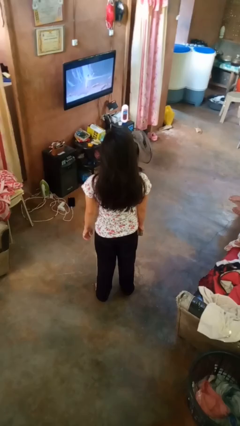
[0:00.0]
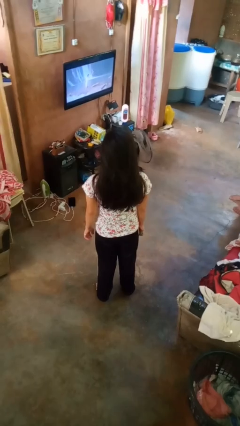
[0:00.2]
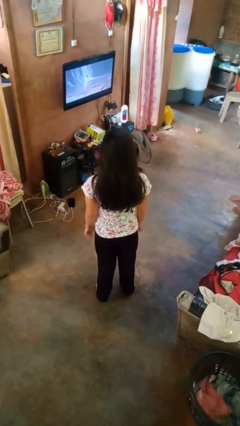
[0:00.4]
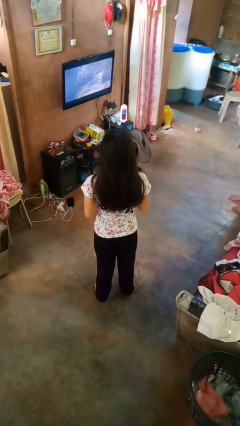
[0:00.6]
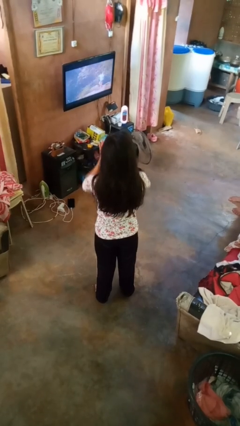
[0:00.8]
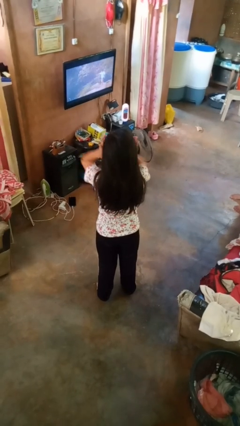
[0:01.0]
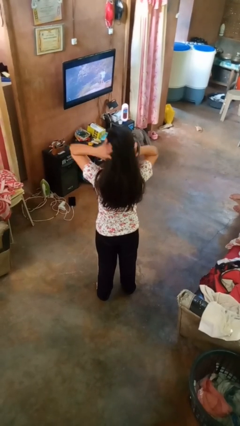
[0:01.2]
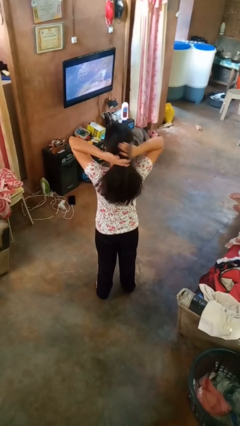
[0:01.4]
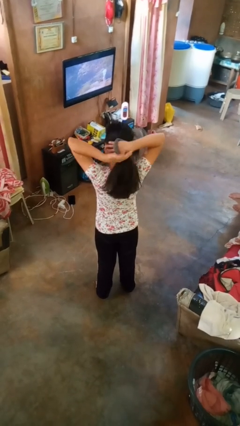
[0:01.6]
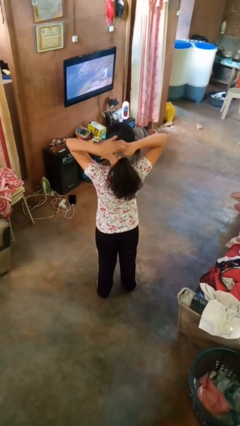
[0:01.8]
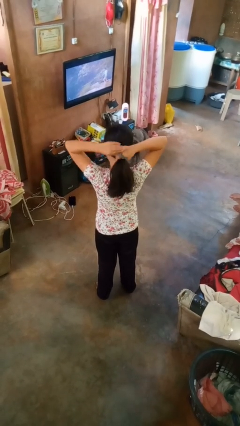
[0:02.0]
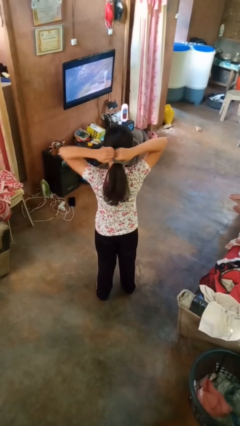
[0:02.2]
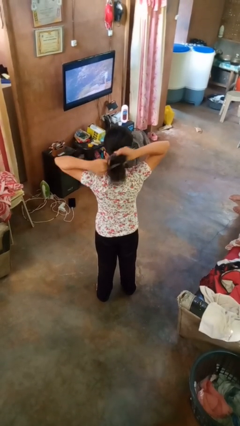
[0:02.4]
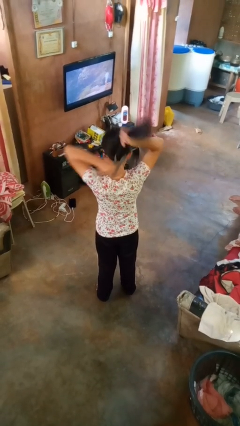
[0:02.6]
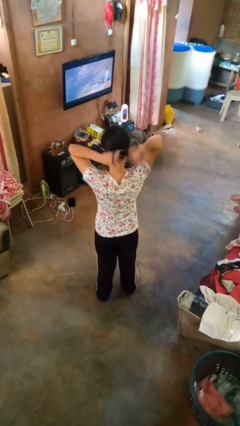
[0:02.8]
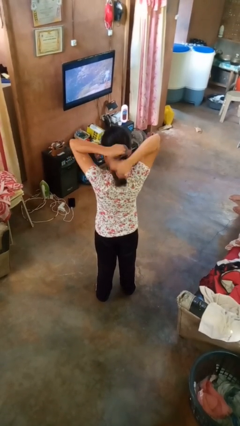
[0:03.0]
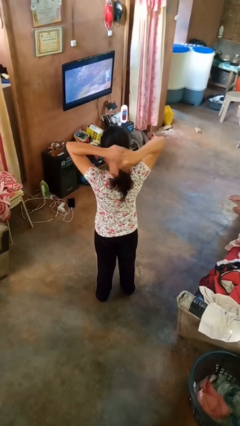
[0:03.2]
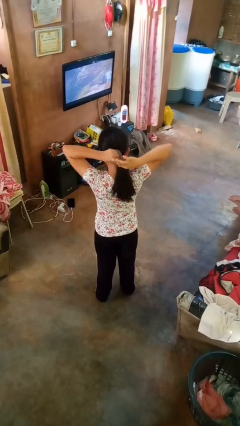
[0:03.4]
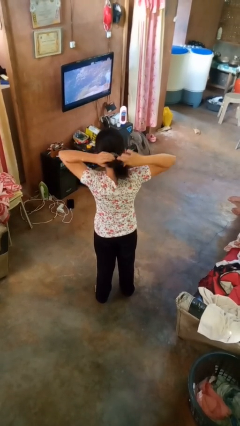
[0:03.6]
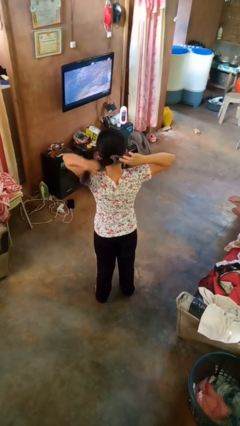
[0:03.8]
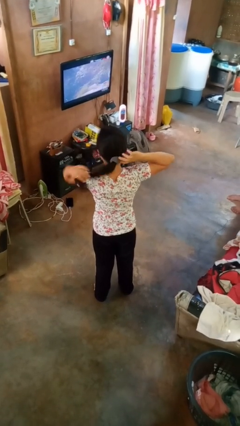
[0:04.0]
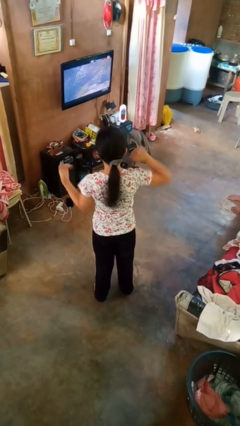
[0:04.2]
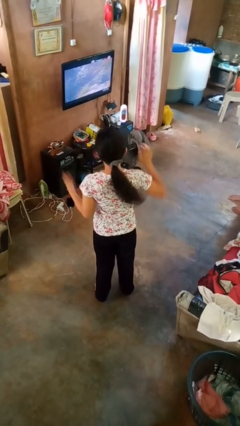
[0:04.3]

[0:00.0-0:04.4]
person puts hair in ponytail

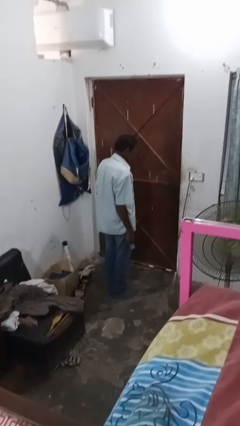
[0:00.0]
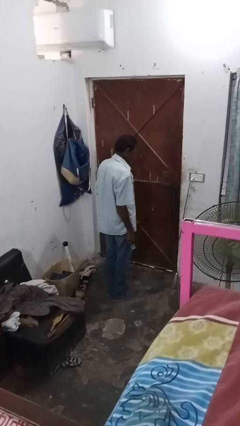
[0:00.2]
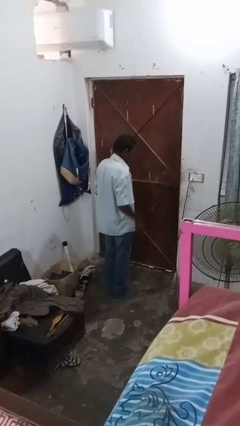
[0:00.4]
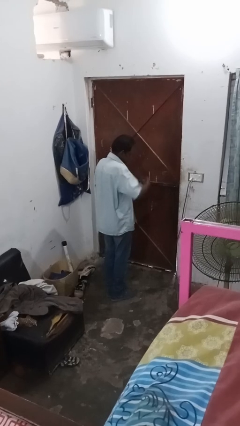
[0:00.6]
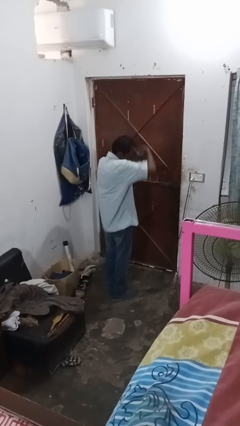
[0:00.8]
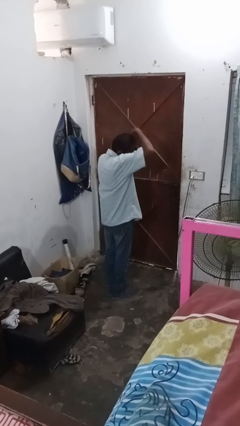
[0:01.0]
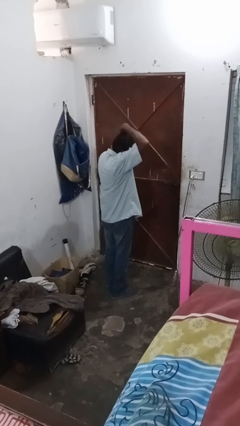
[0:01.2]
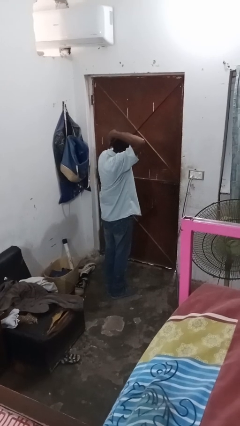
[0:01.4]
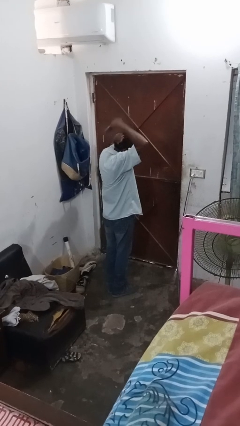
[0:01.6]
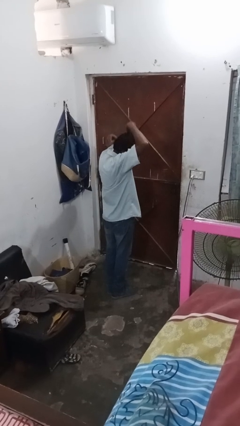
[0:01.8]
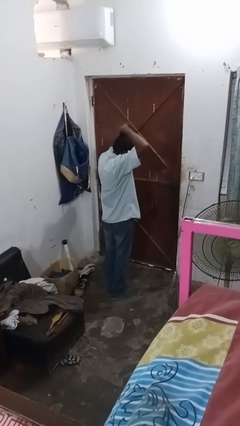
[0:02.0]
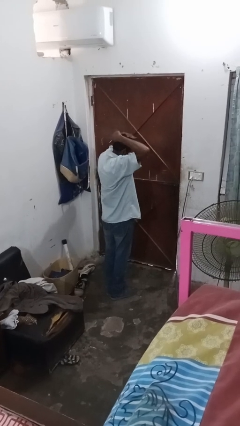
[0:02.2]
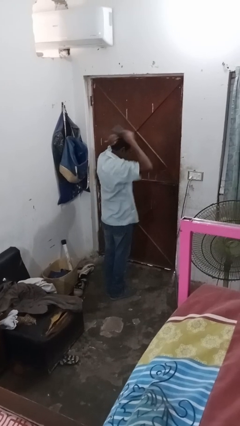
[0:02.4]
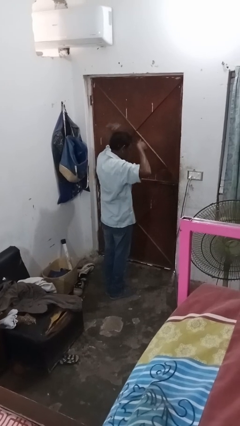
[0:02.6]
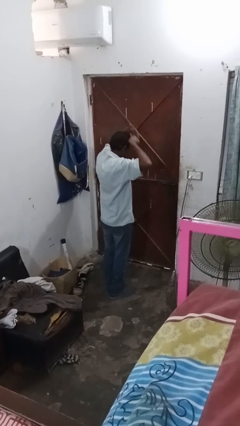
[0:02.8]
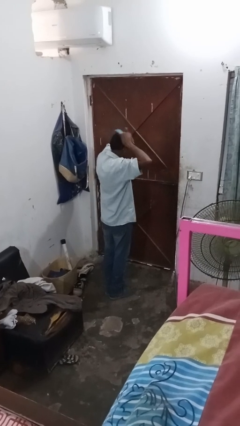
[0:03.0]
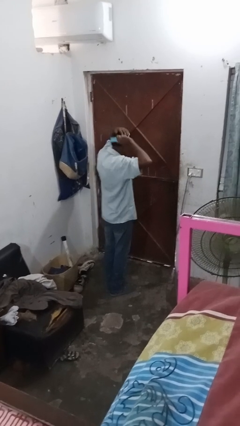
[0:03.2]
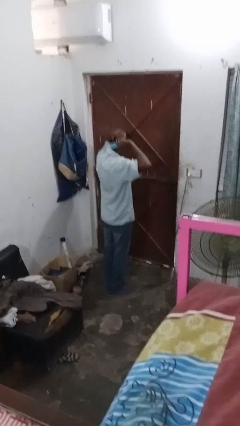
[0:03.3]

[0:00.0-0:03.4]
person brushes hair

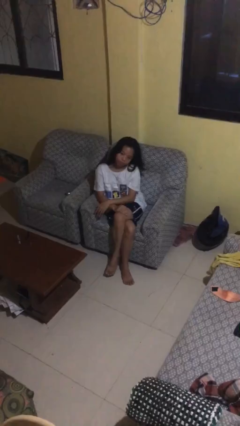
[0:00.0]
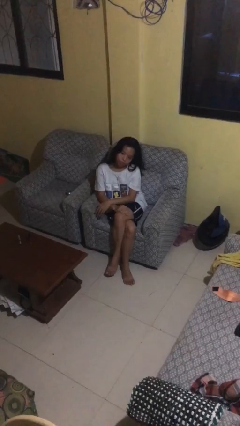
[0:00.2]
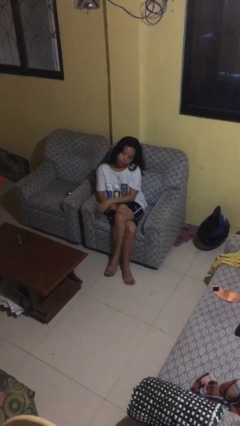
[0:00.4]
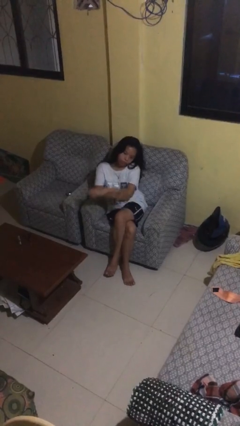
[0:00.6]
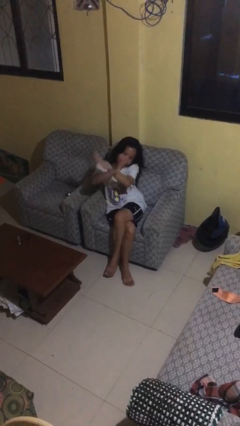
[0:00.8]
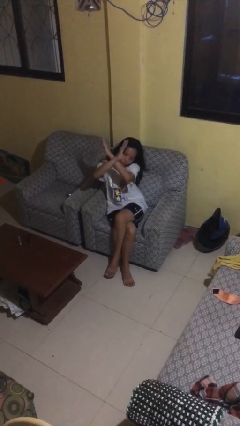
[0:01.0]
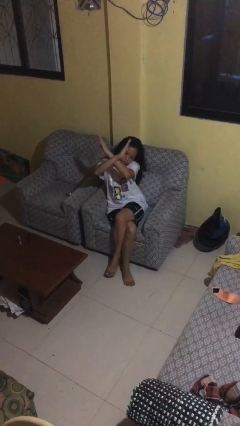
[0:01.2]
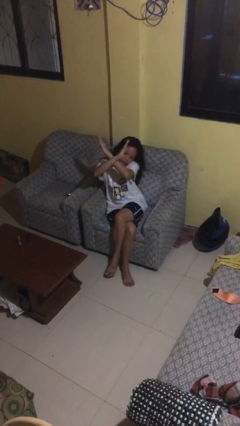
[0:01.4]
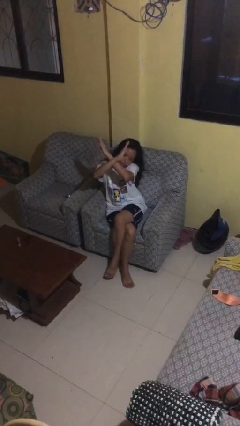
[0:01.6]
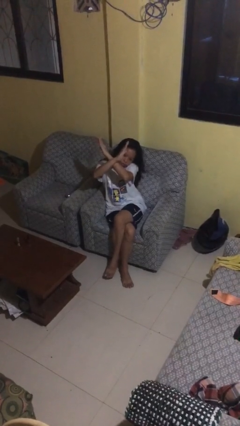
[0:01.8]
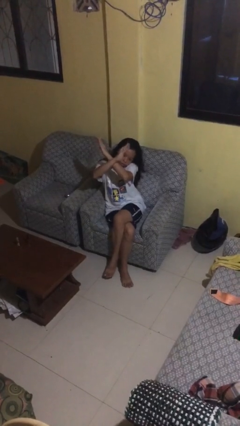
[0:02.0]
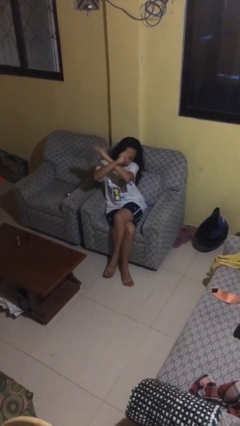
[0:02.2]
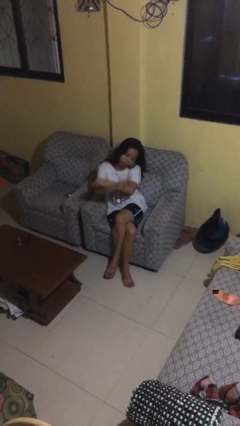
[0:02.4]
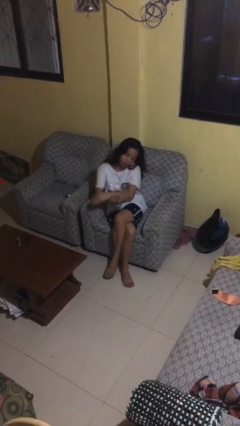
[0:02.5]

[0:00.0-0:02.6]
person gestures arms x

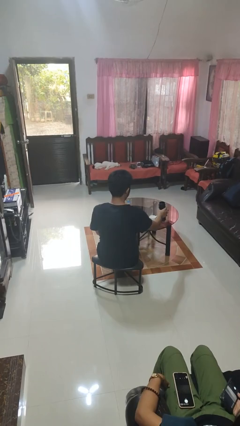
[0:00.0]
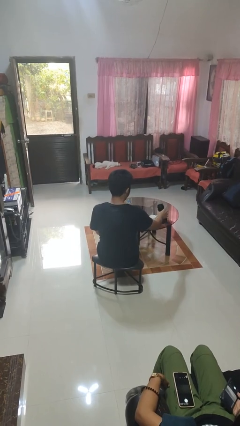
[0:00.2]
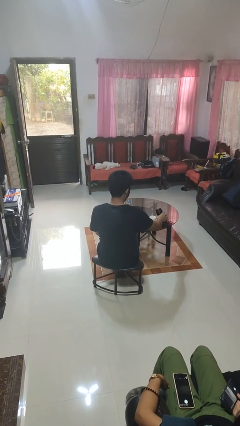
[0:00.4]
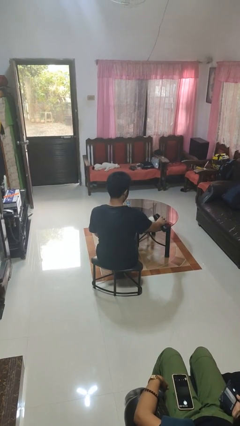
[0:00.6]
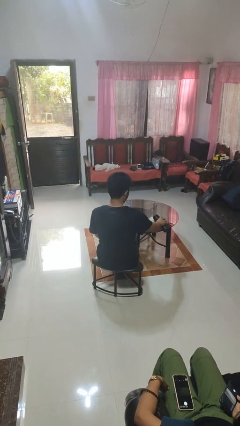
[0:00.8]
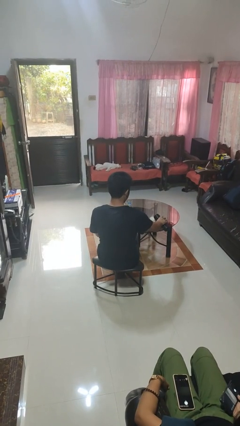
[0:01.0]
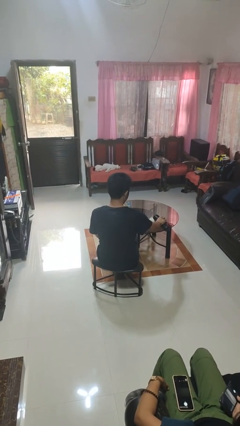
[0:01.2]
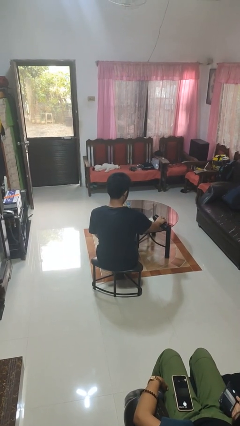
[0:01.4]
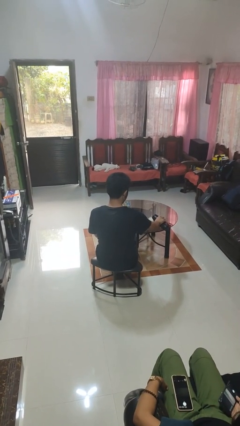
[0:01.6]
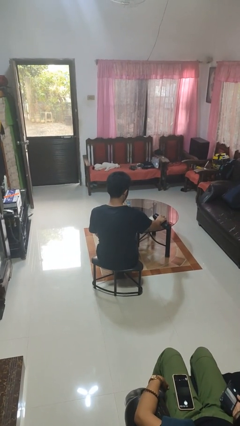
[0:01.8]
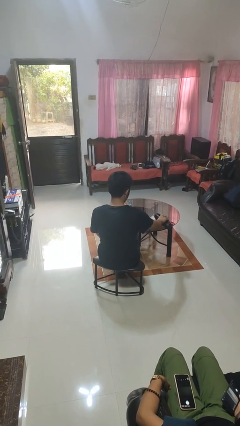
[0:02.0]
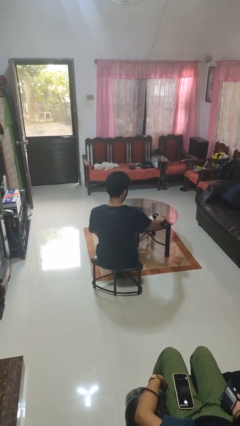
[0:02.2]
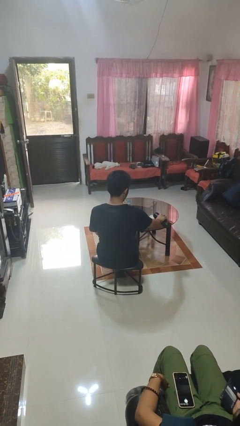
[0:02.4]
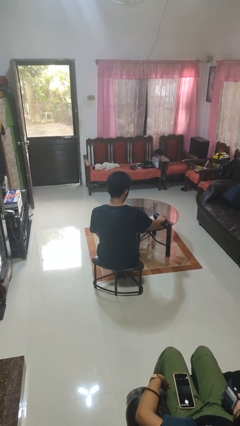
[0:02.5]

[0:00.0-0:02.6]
person pours liquid into cup

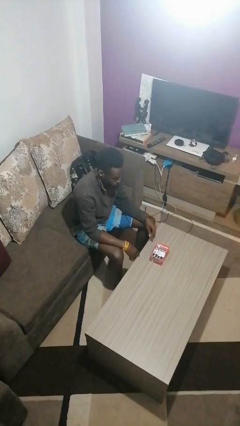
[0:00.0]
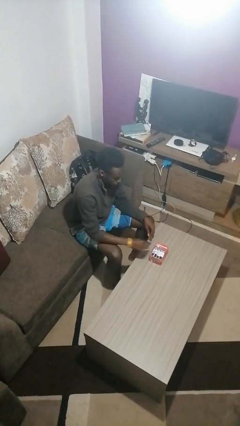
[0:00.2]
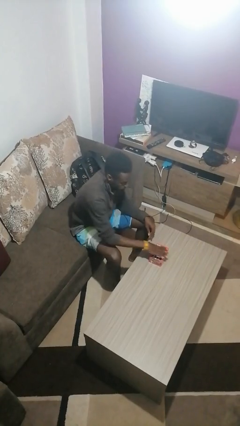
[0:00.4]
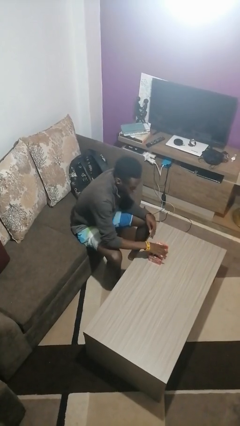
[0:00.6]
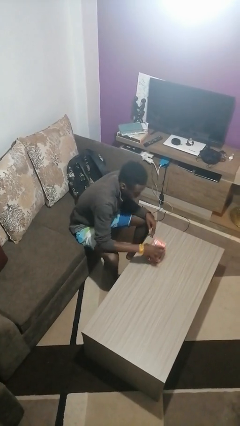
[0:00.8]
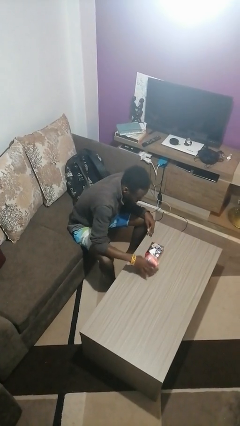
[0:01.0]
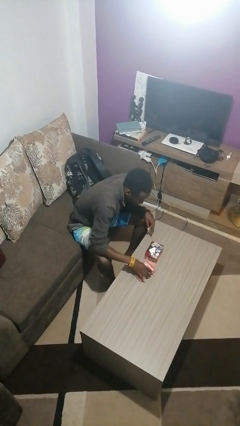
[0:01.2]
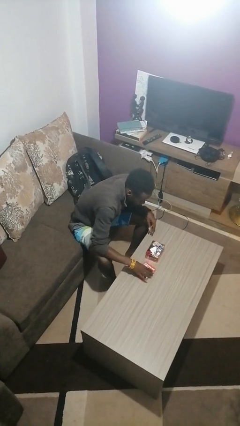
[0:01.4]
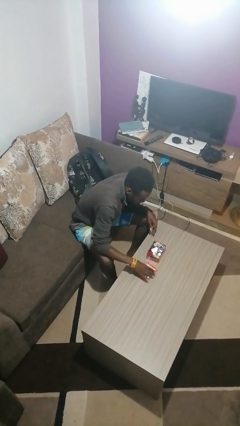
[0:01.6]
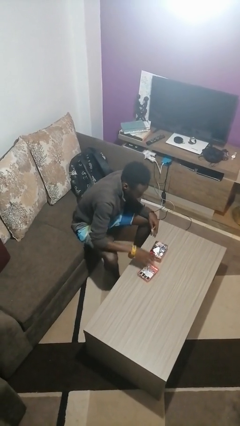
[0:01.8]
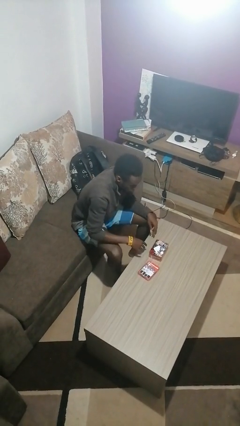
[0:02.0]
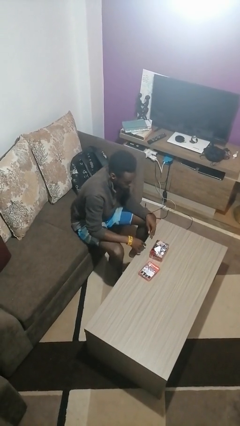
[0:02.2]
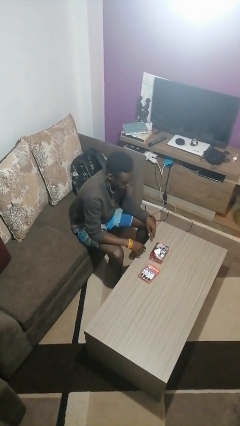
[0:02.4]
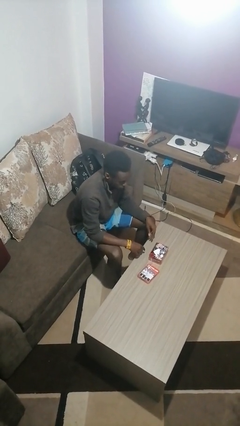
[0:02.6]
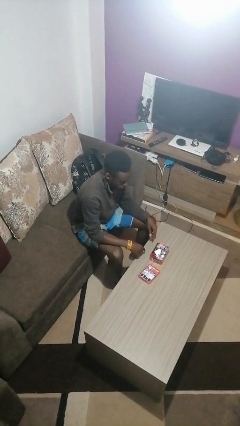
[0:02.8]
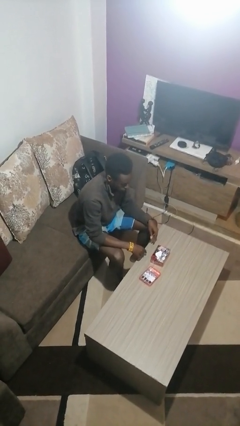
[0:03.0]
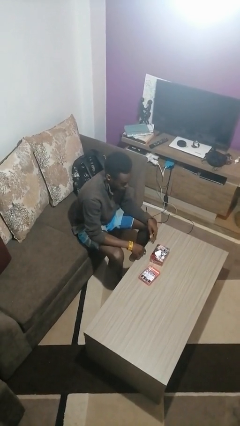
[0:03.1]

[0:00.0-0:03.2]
person opens jewelry box

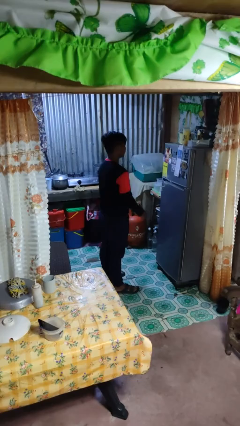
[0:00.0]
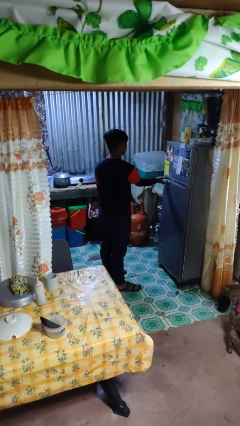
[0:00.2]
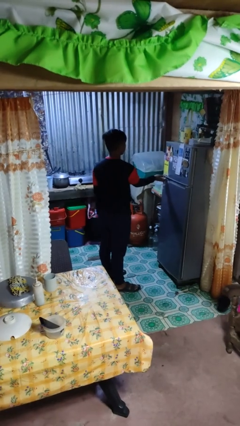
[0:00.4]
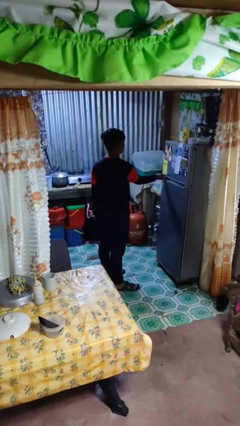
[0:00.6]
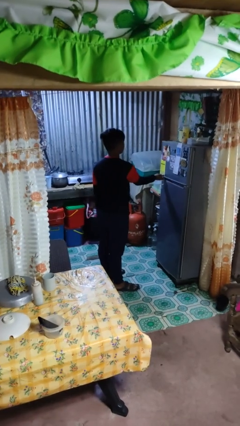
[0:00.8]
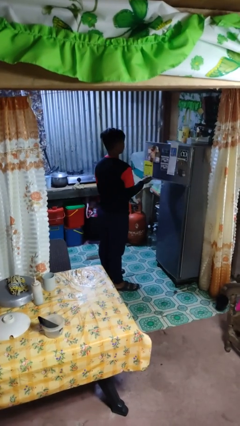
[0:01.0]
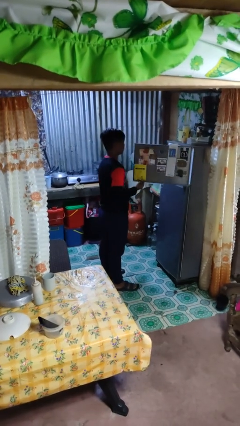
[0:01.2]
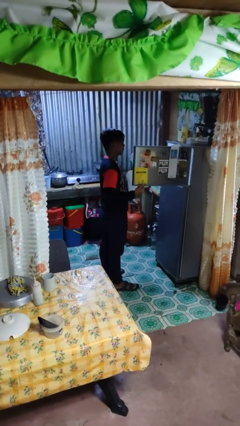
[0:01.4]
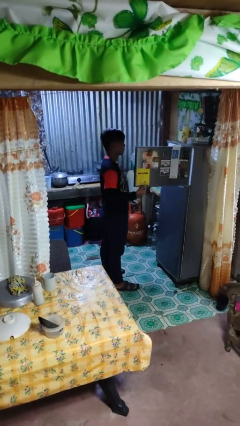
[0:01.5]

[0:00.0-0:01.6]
person opens refrigerator
